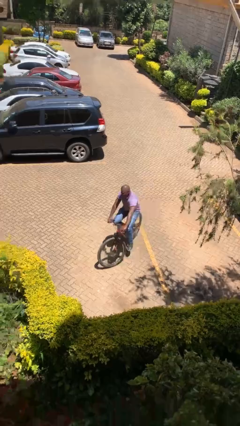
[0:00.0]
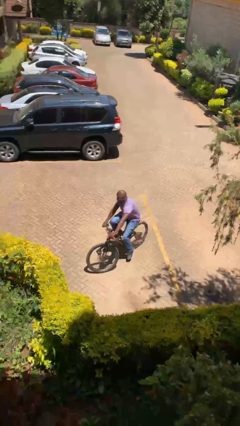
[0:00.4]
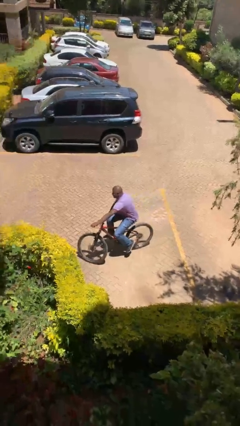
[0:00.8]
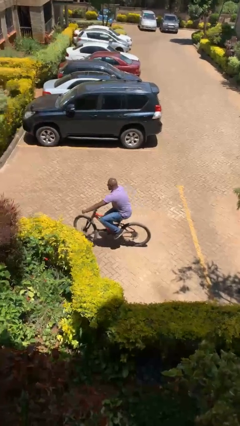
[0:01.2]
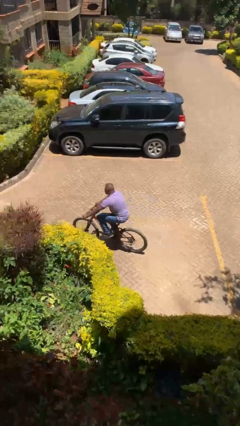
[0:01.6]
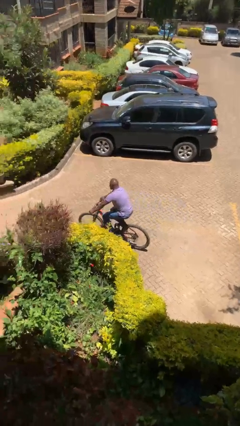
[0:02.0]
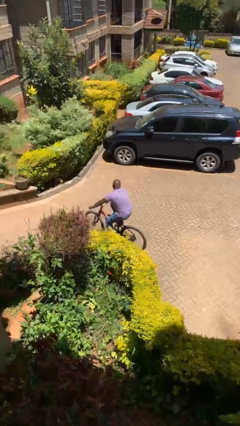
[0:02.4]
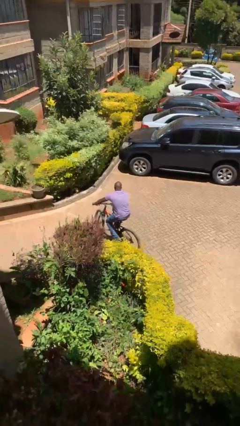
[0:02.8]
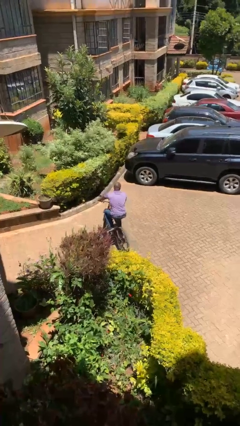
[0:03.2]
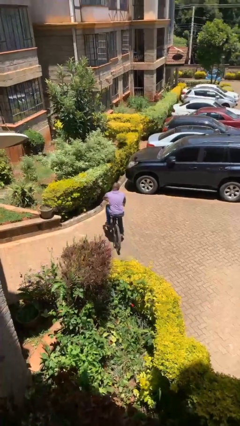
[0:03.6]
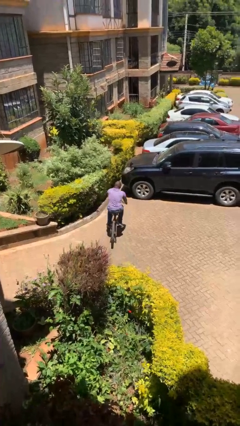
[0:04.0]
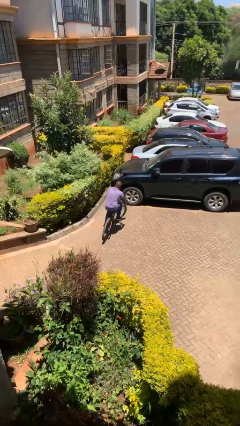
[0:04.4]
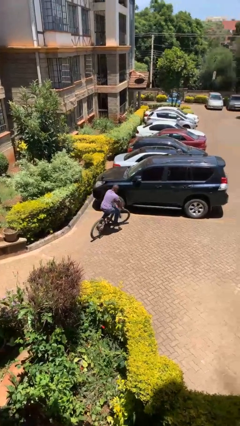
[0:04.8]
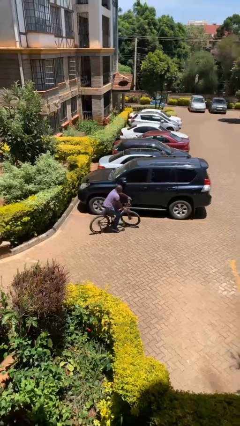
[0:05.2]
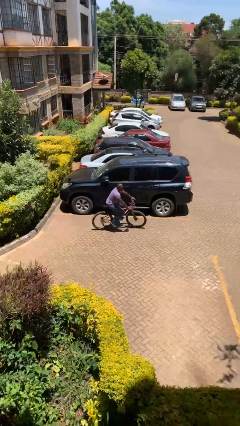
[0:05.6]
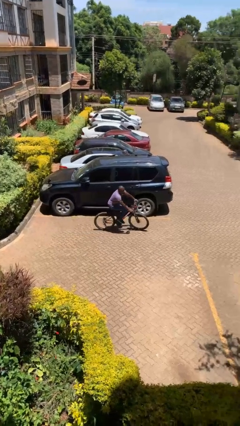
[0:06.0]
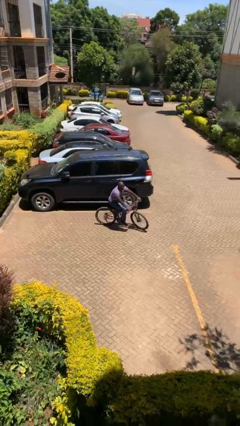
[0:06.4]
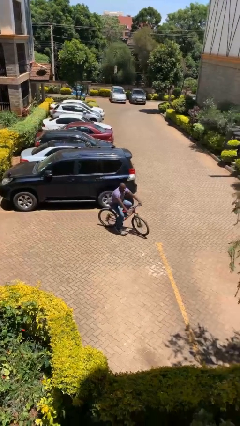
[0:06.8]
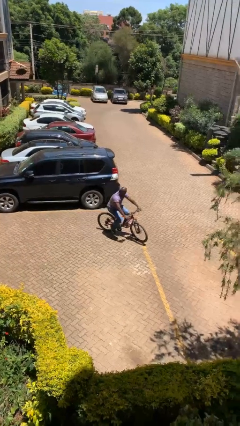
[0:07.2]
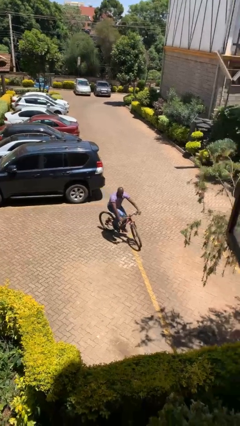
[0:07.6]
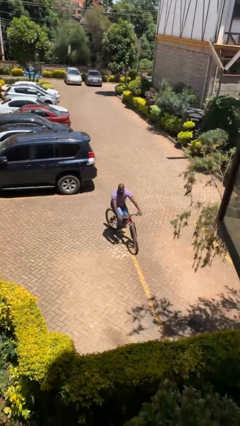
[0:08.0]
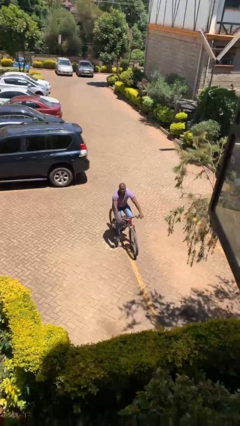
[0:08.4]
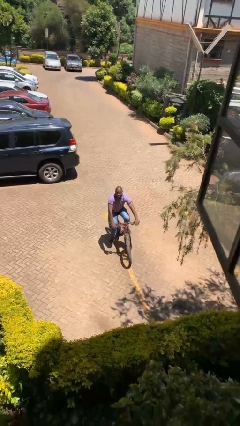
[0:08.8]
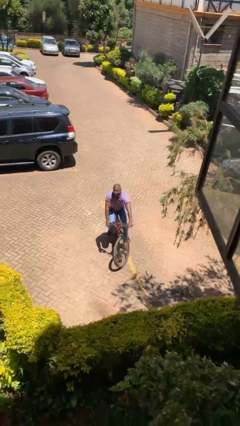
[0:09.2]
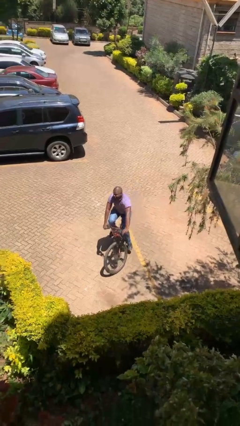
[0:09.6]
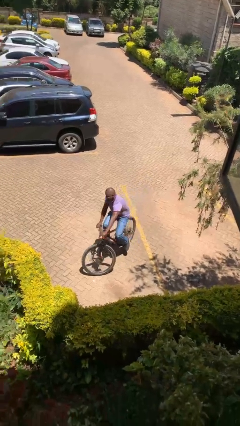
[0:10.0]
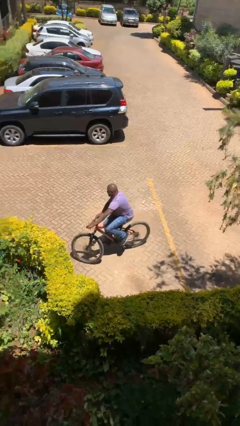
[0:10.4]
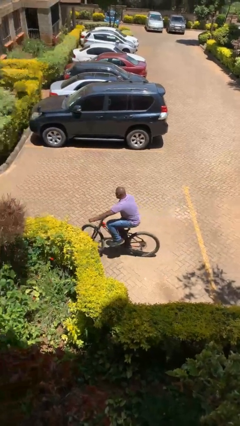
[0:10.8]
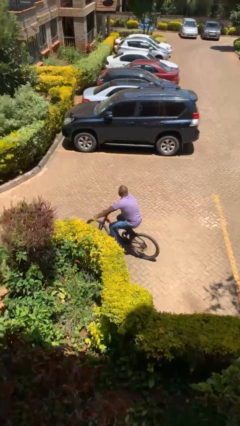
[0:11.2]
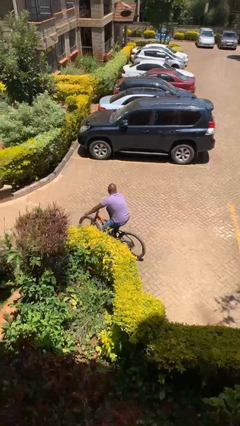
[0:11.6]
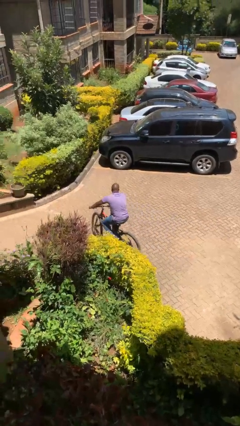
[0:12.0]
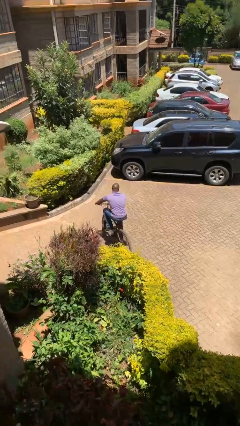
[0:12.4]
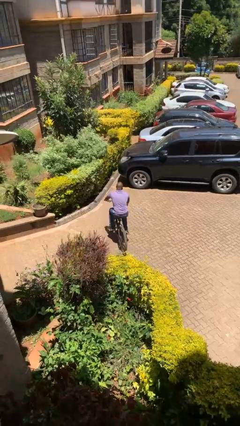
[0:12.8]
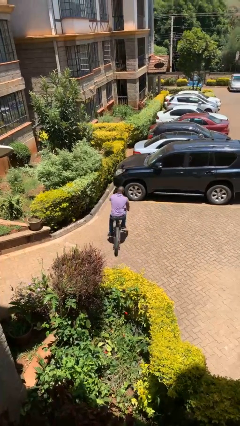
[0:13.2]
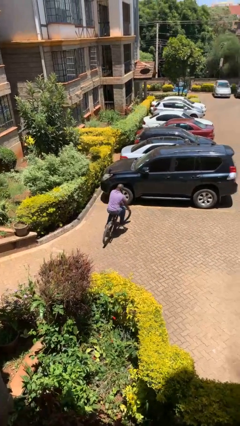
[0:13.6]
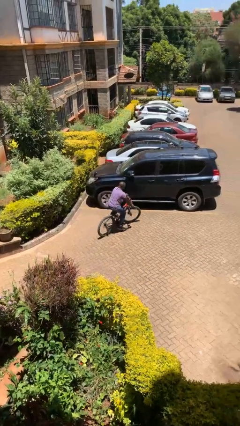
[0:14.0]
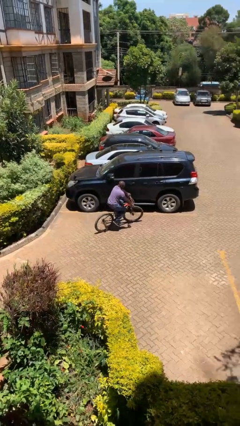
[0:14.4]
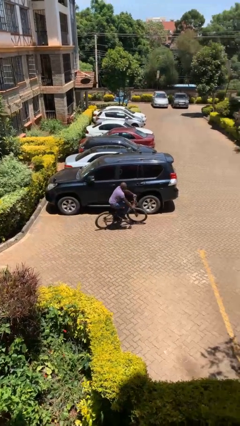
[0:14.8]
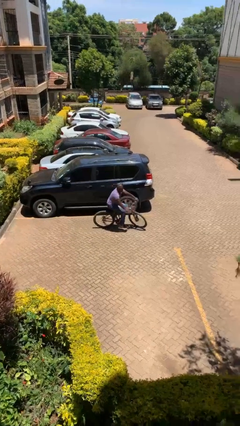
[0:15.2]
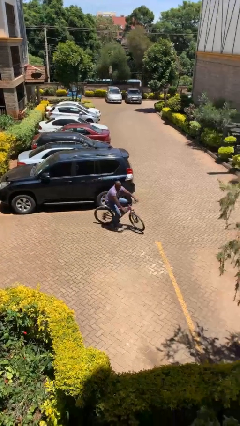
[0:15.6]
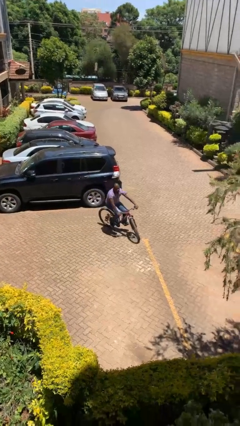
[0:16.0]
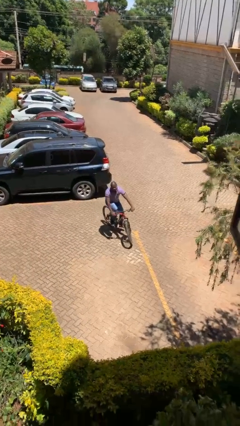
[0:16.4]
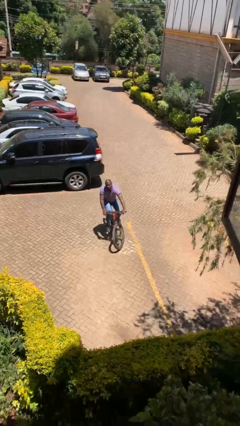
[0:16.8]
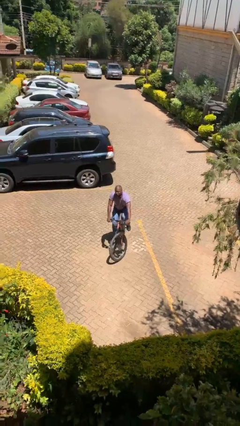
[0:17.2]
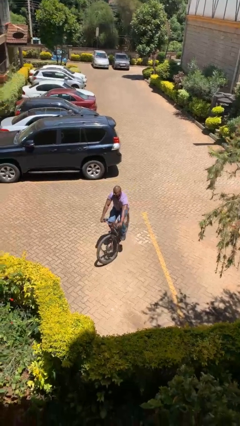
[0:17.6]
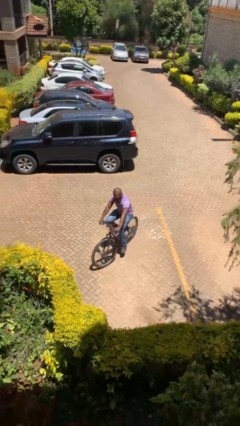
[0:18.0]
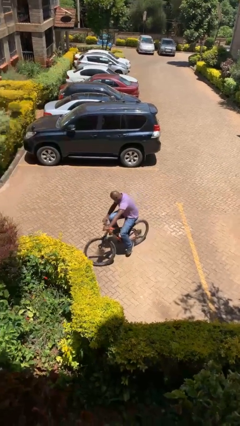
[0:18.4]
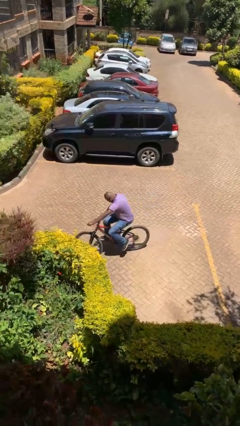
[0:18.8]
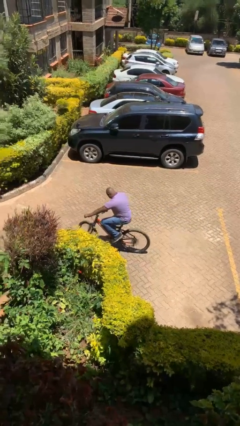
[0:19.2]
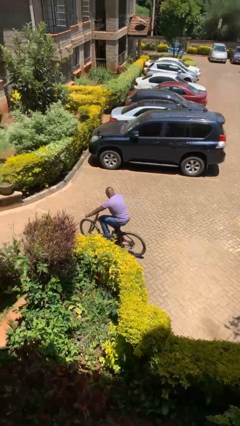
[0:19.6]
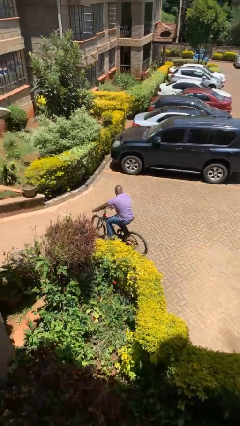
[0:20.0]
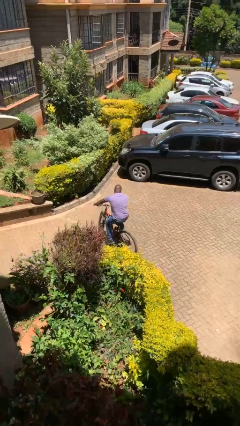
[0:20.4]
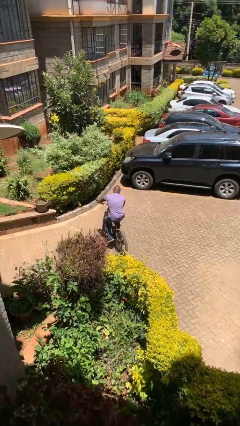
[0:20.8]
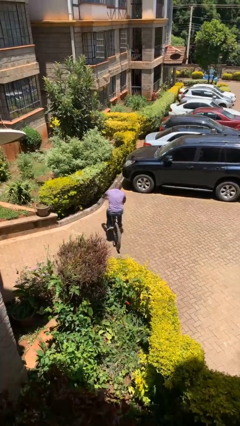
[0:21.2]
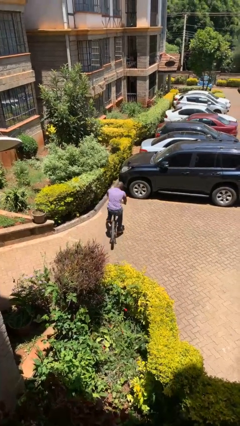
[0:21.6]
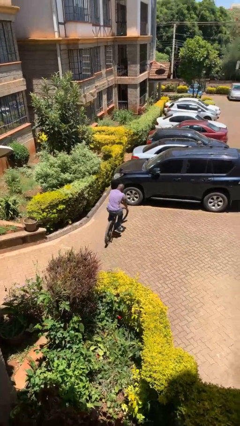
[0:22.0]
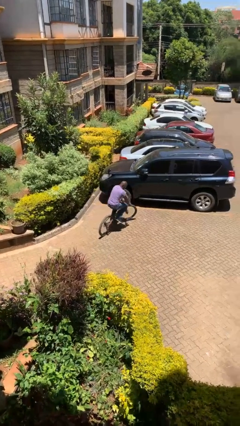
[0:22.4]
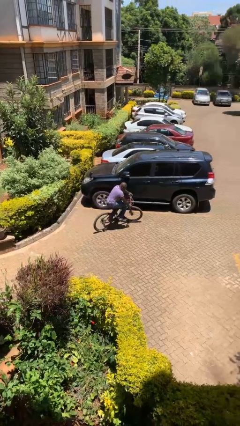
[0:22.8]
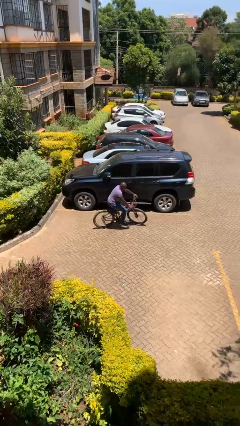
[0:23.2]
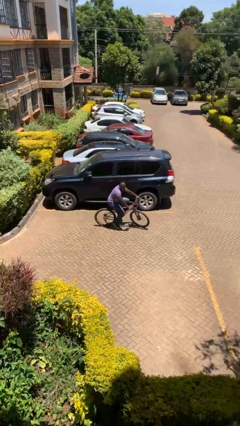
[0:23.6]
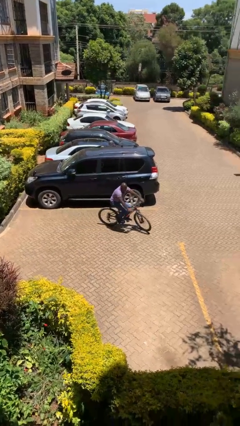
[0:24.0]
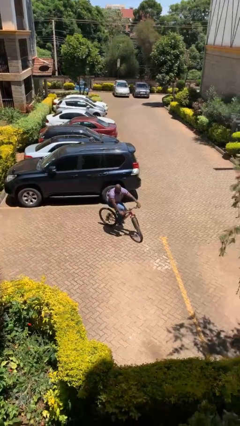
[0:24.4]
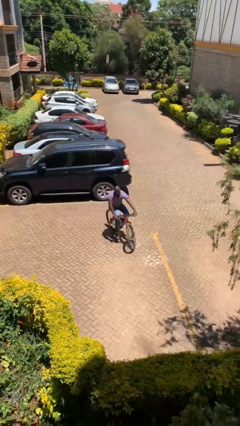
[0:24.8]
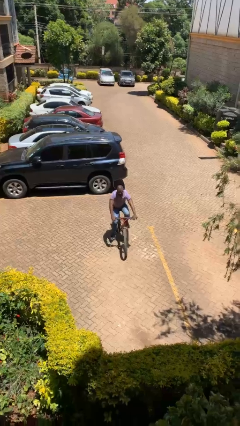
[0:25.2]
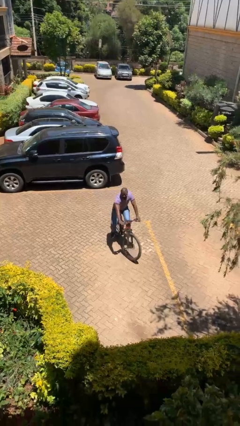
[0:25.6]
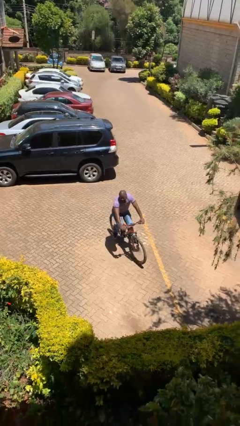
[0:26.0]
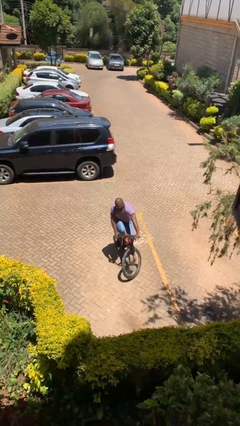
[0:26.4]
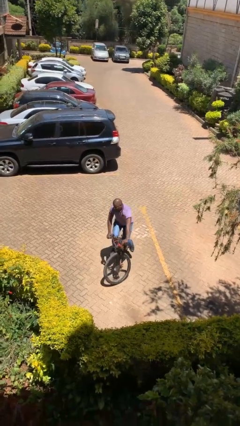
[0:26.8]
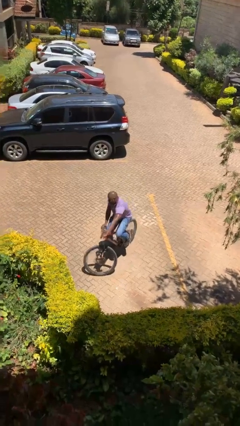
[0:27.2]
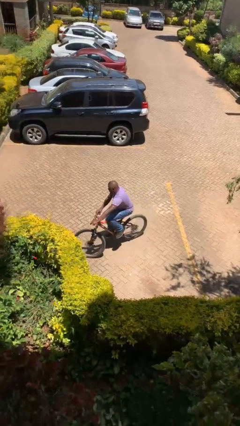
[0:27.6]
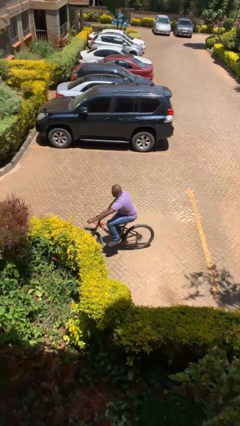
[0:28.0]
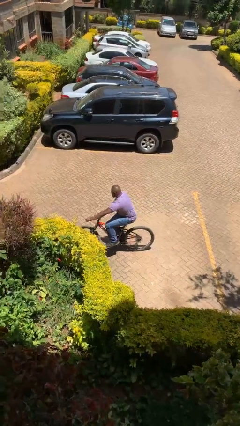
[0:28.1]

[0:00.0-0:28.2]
person rides bicycle

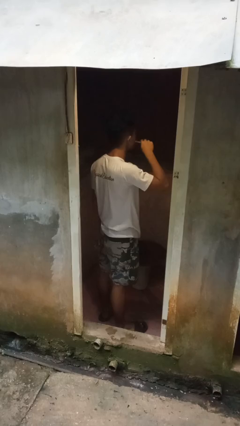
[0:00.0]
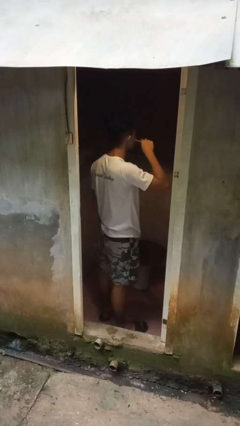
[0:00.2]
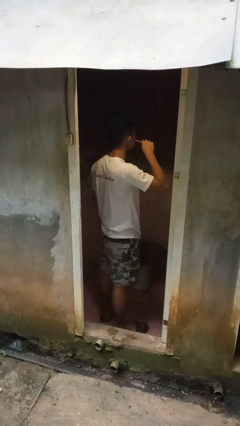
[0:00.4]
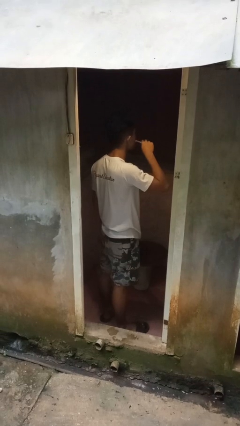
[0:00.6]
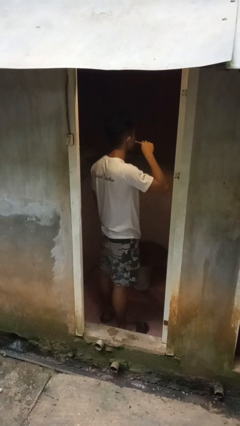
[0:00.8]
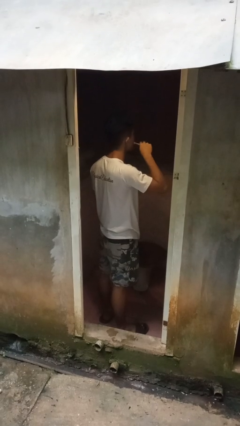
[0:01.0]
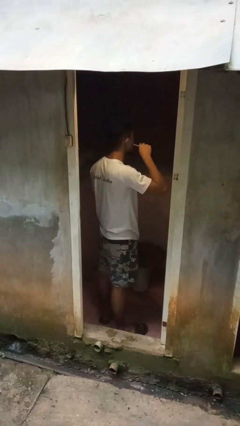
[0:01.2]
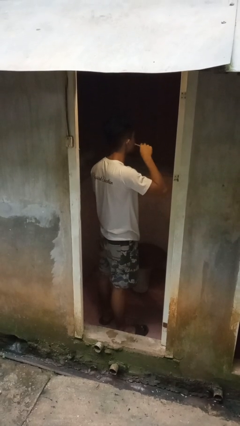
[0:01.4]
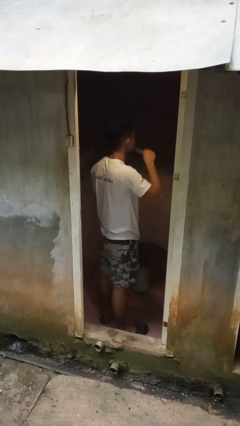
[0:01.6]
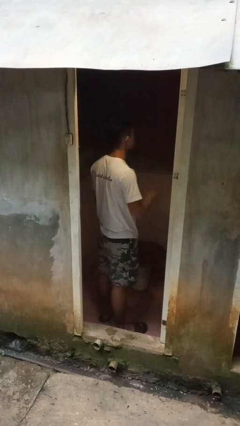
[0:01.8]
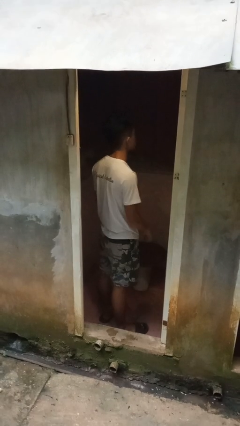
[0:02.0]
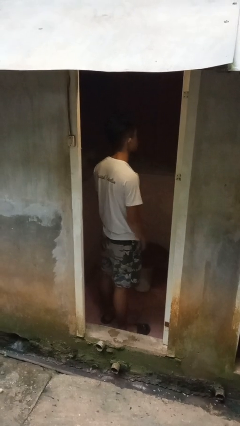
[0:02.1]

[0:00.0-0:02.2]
person brushes teeth

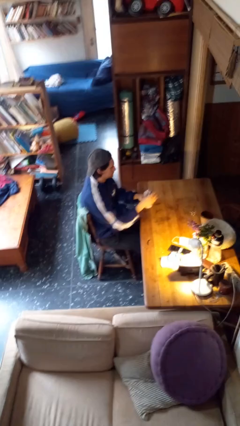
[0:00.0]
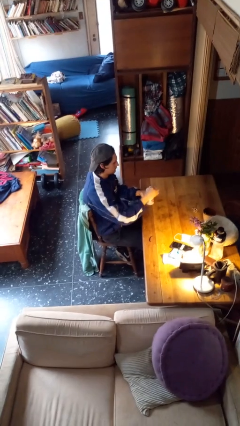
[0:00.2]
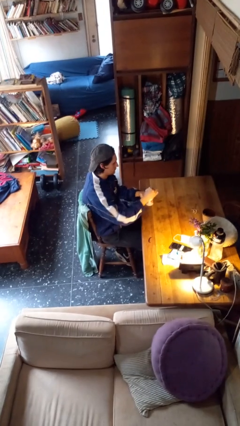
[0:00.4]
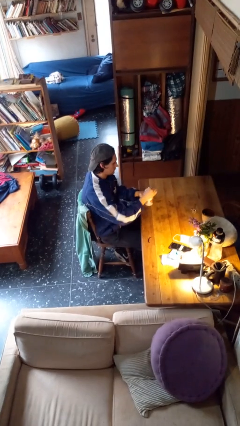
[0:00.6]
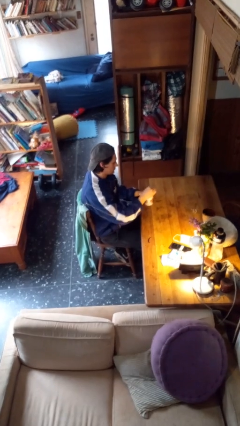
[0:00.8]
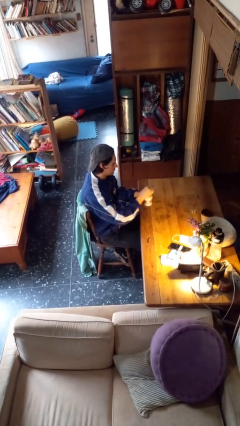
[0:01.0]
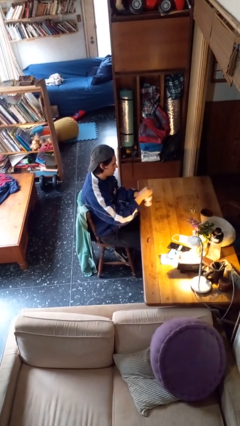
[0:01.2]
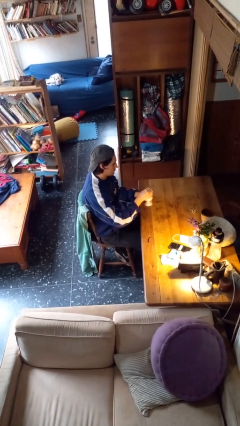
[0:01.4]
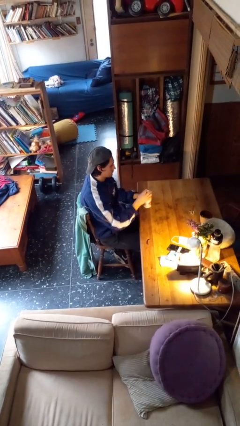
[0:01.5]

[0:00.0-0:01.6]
person stirs mug
